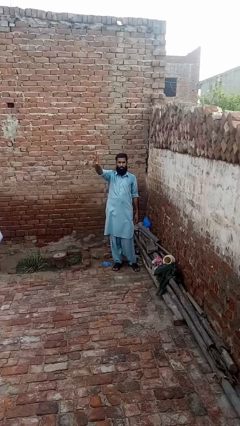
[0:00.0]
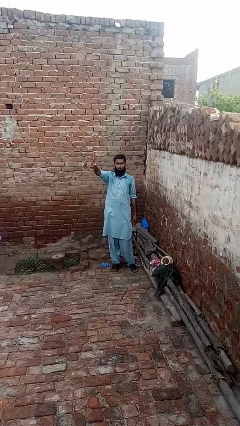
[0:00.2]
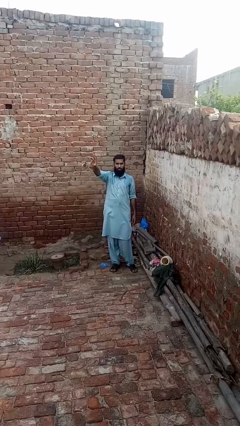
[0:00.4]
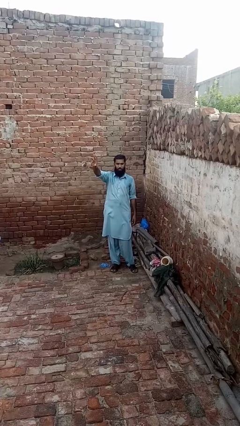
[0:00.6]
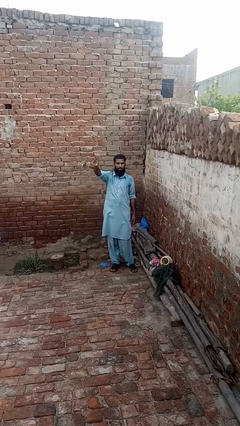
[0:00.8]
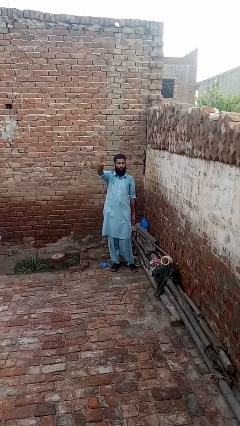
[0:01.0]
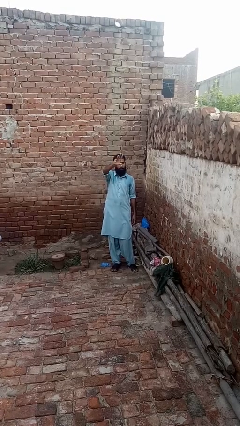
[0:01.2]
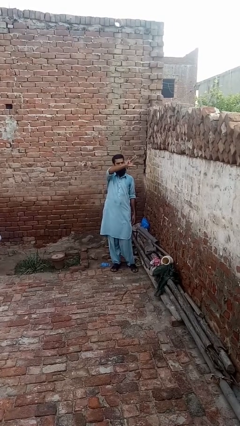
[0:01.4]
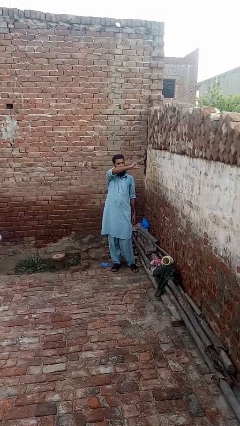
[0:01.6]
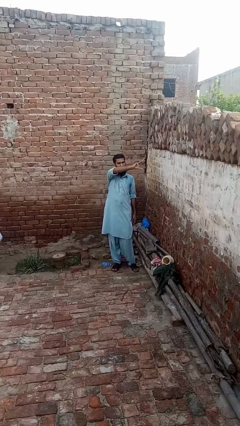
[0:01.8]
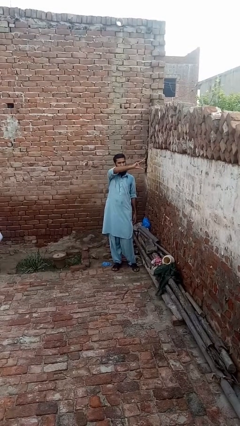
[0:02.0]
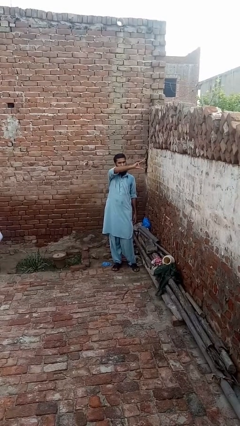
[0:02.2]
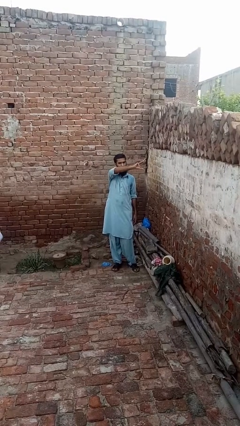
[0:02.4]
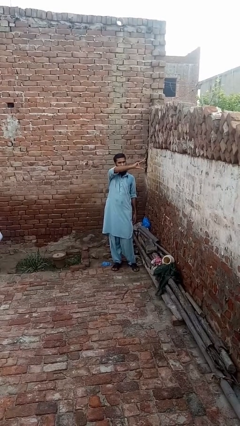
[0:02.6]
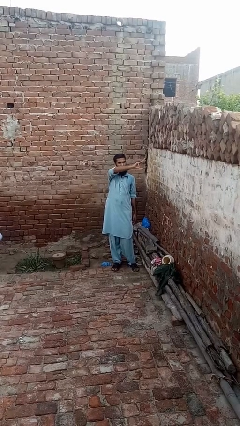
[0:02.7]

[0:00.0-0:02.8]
person gestures swipe left

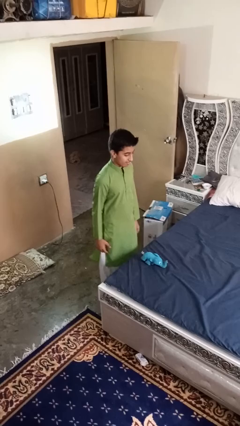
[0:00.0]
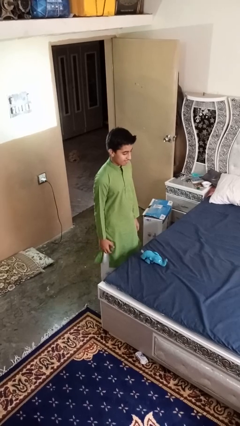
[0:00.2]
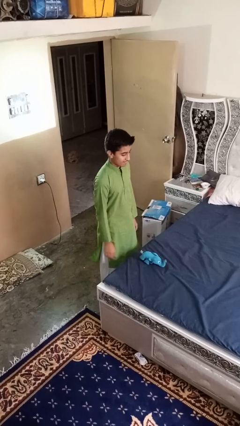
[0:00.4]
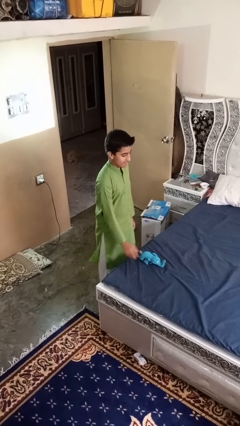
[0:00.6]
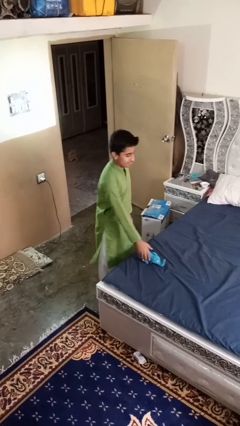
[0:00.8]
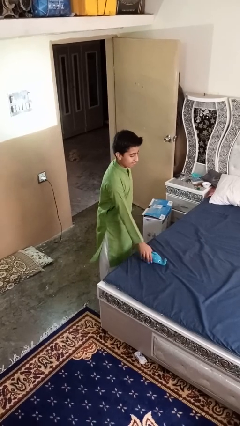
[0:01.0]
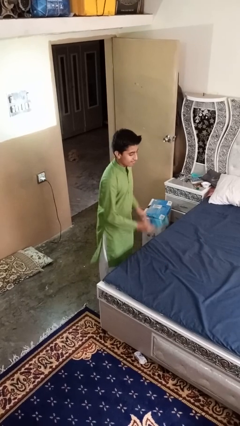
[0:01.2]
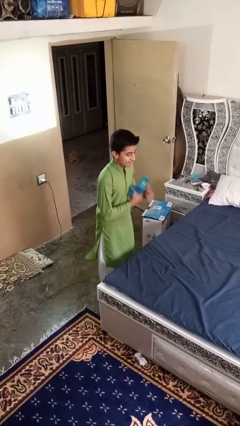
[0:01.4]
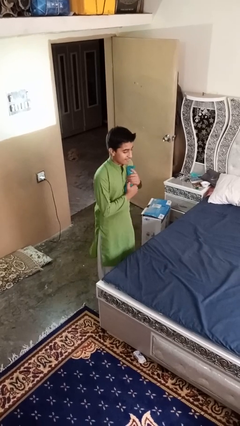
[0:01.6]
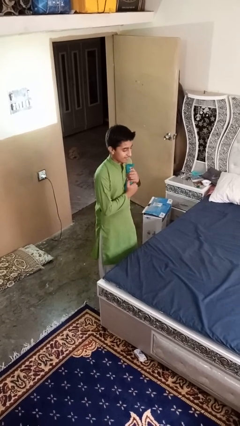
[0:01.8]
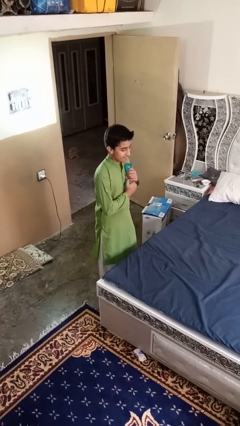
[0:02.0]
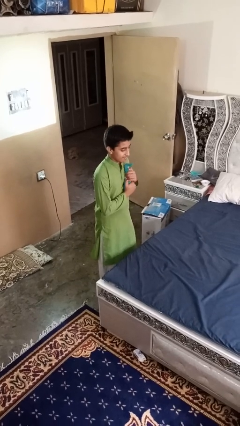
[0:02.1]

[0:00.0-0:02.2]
person hugs stuffed animal

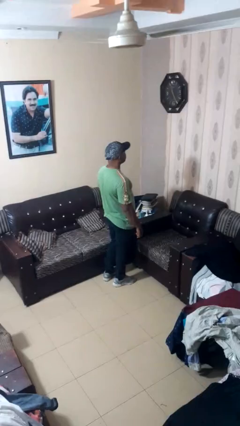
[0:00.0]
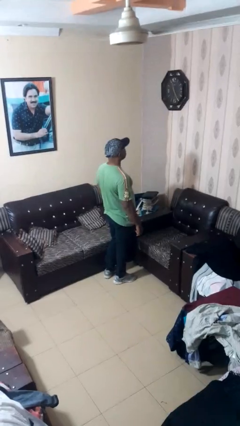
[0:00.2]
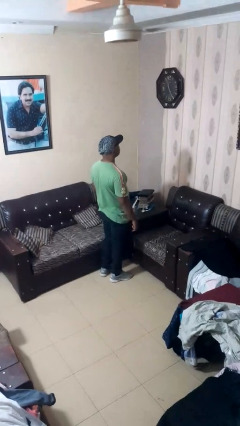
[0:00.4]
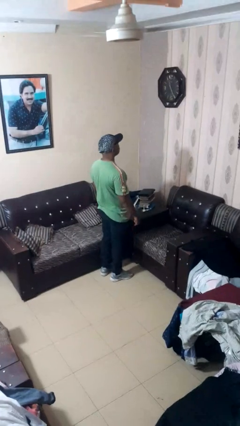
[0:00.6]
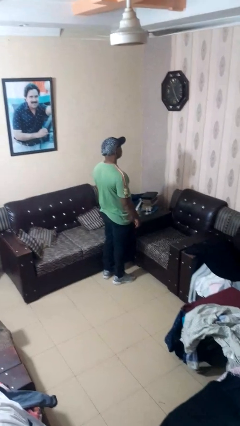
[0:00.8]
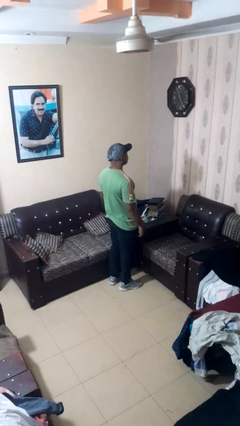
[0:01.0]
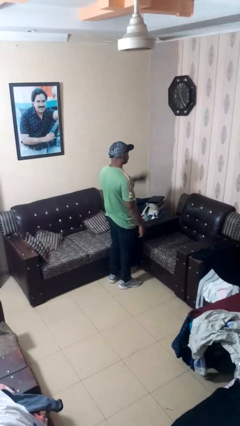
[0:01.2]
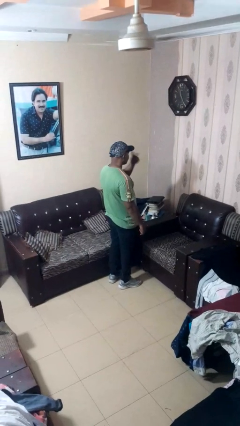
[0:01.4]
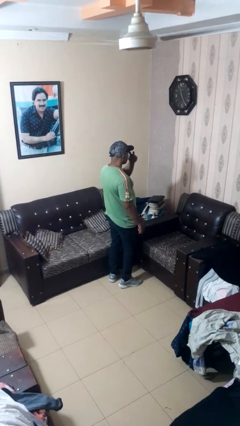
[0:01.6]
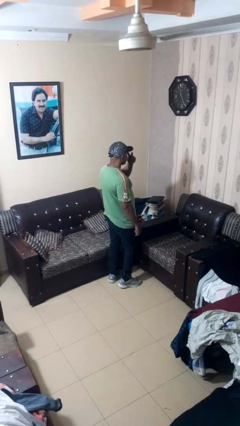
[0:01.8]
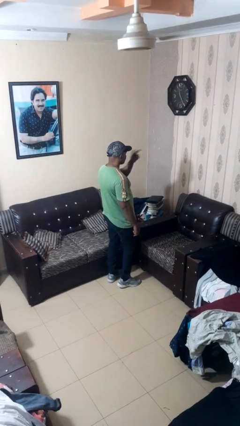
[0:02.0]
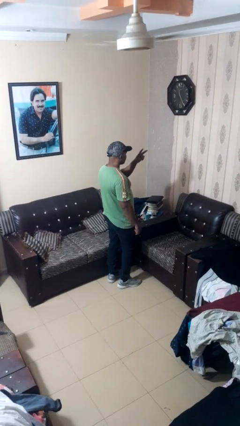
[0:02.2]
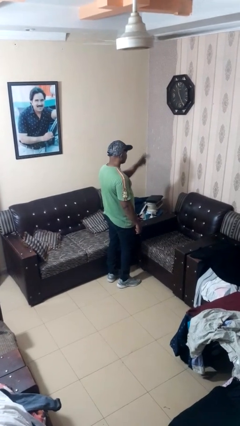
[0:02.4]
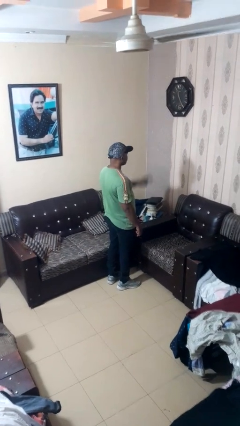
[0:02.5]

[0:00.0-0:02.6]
person gestures watch closely

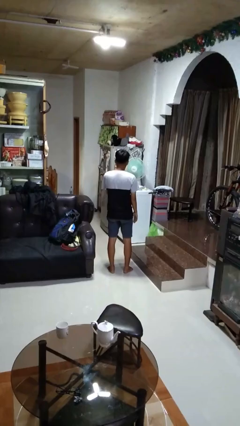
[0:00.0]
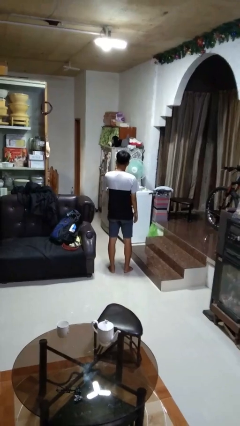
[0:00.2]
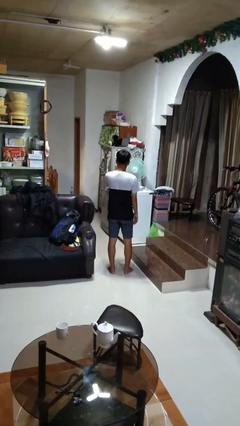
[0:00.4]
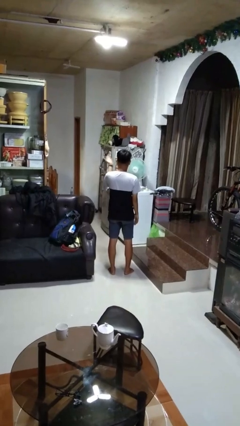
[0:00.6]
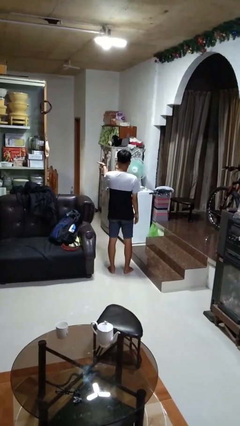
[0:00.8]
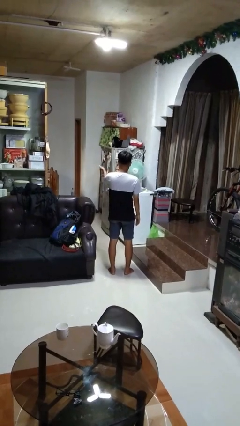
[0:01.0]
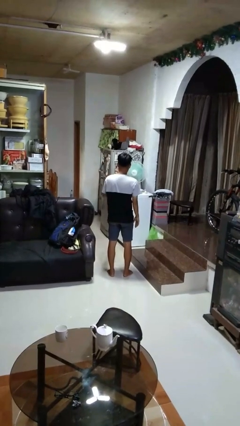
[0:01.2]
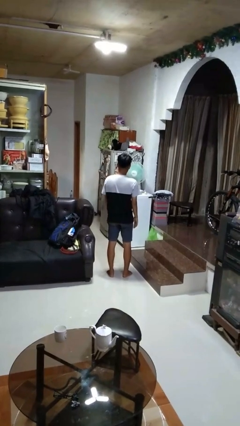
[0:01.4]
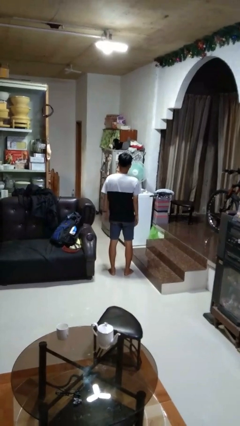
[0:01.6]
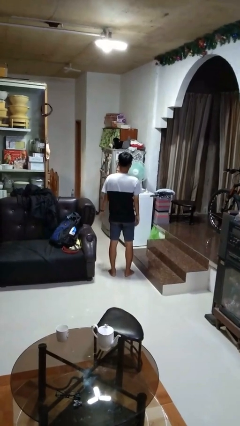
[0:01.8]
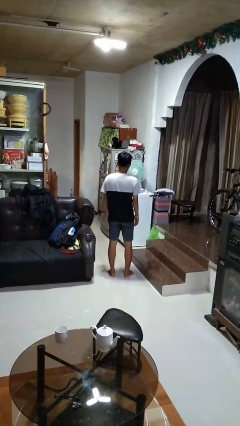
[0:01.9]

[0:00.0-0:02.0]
person gestures blow kiss

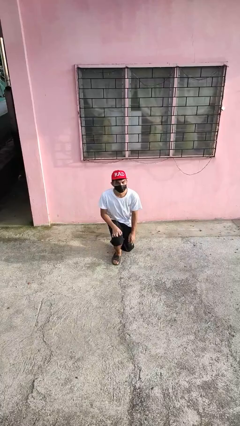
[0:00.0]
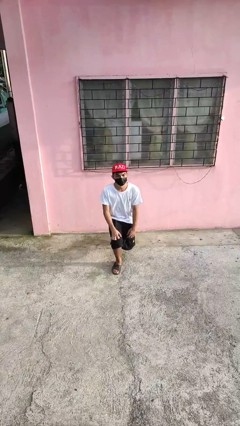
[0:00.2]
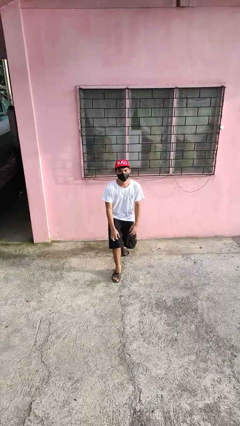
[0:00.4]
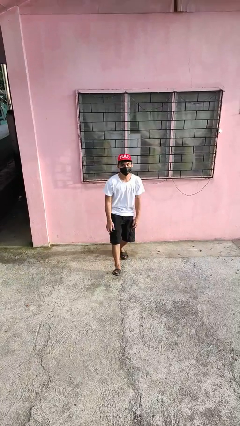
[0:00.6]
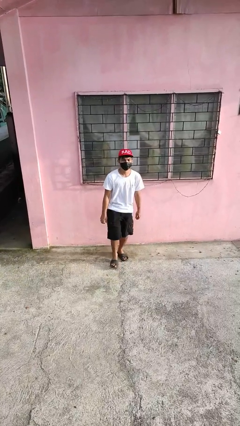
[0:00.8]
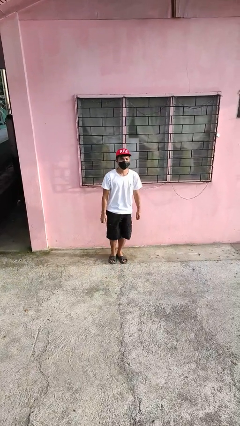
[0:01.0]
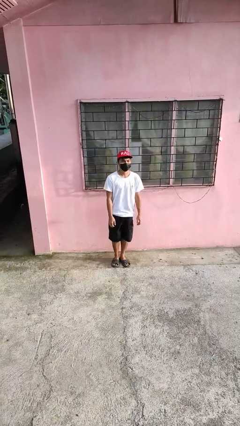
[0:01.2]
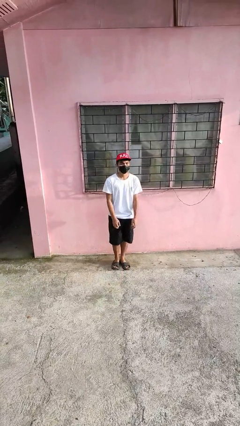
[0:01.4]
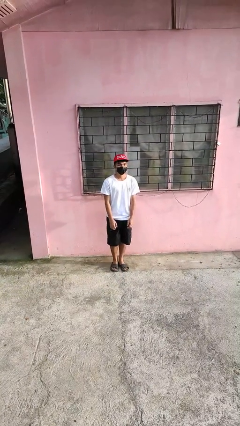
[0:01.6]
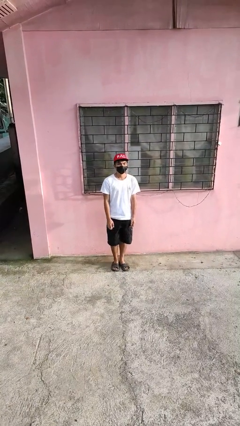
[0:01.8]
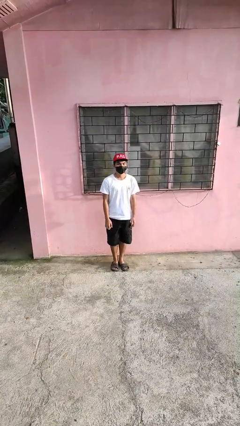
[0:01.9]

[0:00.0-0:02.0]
person stands up from floor

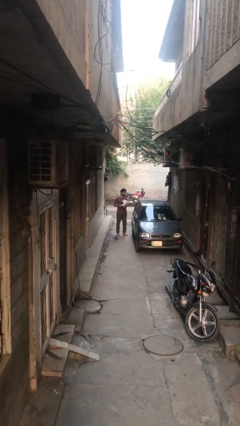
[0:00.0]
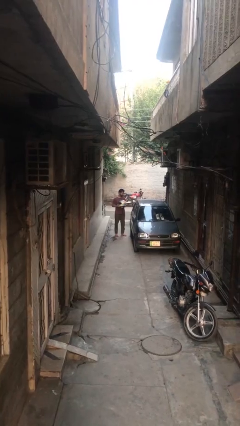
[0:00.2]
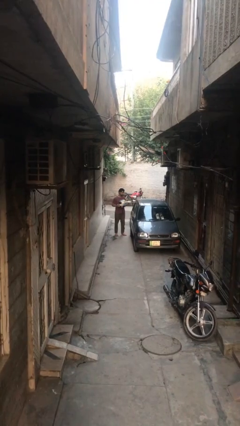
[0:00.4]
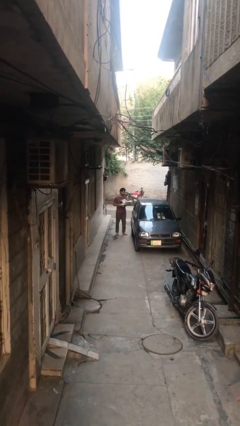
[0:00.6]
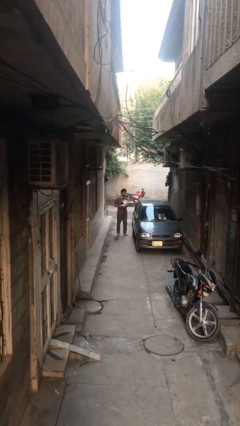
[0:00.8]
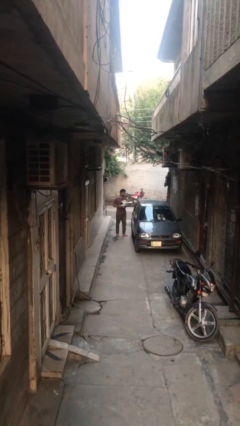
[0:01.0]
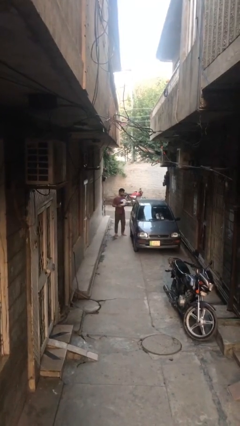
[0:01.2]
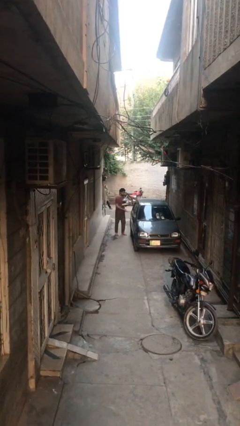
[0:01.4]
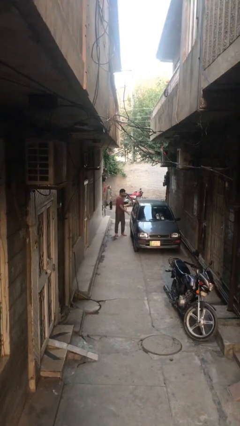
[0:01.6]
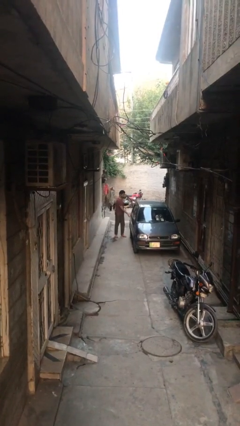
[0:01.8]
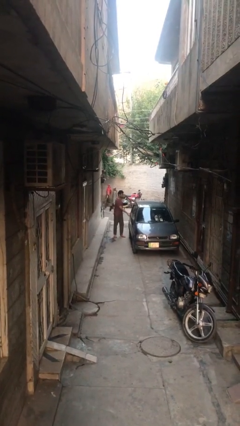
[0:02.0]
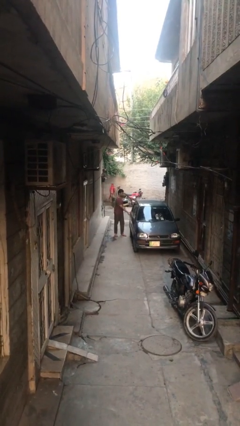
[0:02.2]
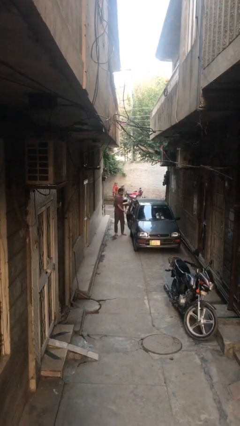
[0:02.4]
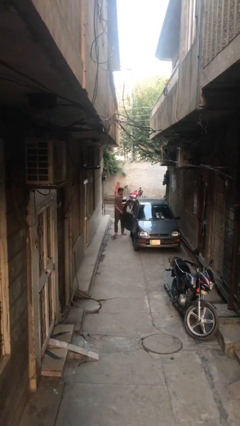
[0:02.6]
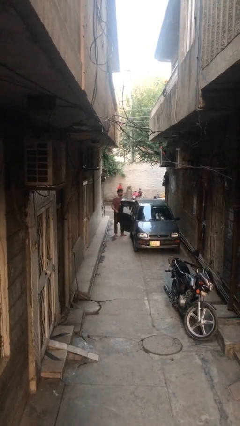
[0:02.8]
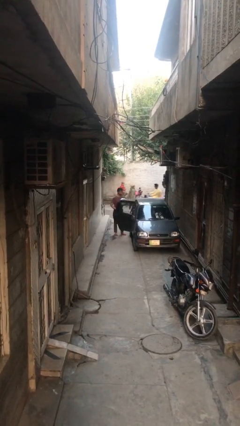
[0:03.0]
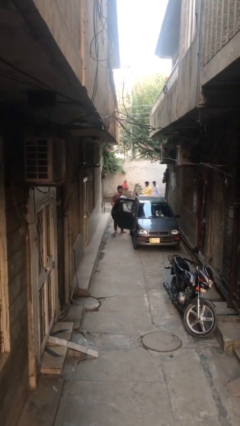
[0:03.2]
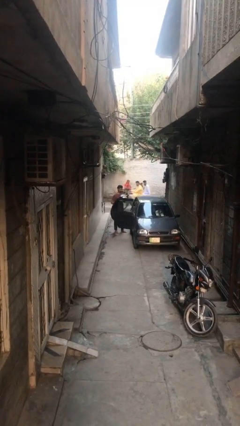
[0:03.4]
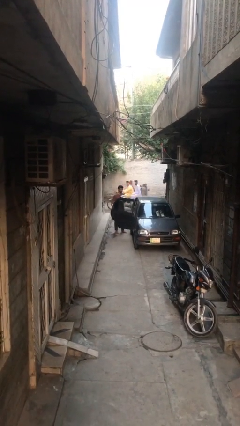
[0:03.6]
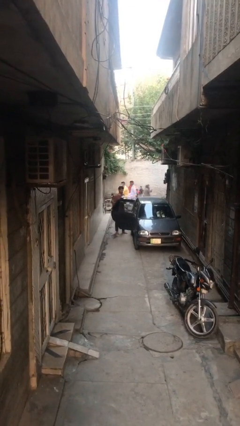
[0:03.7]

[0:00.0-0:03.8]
person opens car door

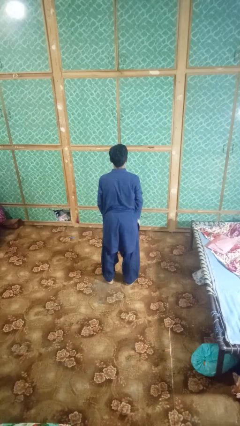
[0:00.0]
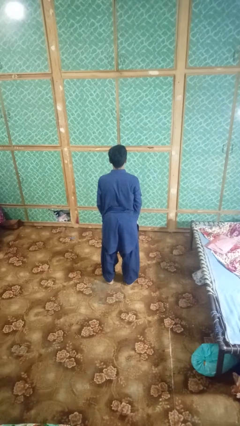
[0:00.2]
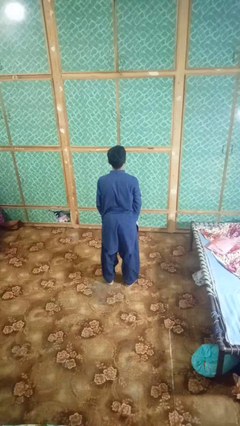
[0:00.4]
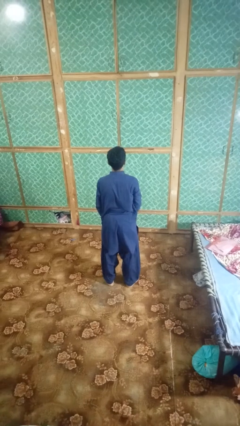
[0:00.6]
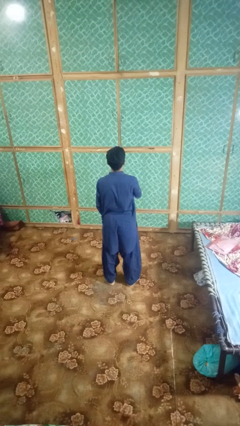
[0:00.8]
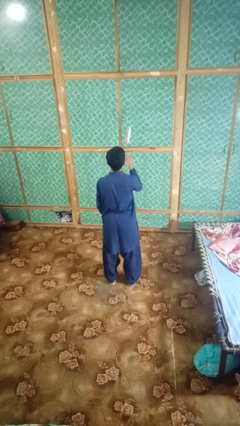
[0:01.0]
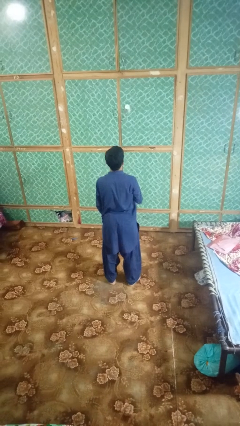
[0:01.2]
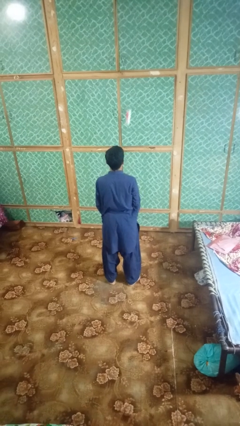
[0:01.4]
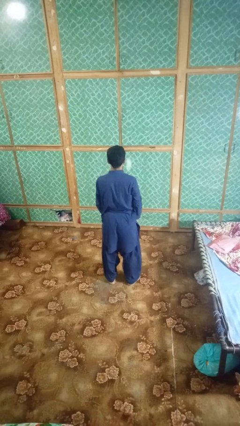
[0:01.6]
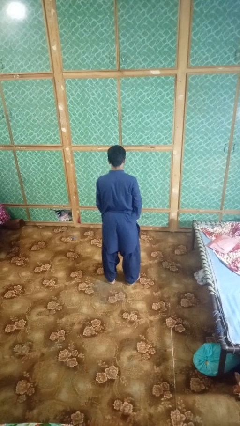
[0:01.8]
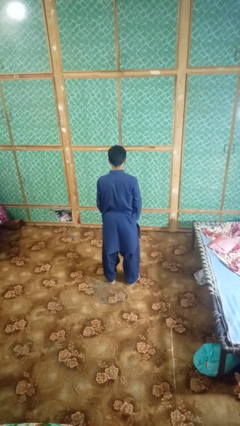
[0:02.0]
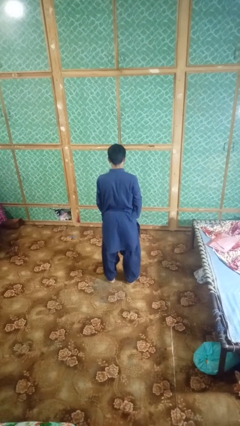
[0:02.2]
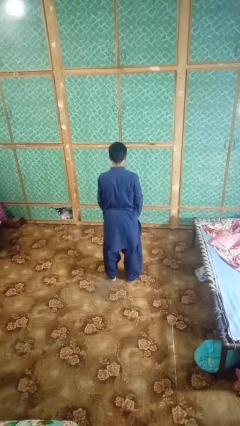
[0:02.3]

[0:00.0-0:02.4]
person throws object into air
